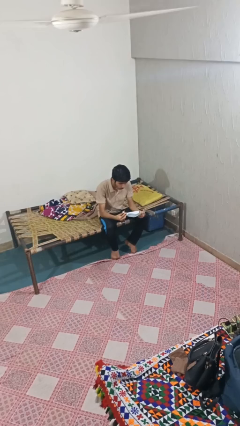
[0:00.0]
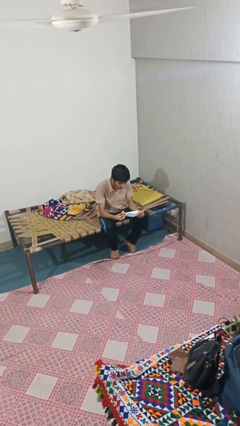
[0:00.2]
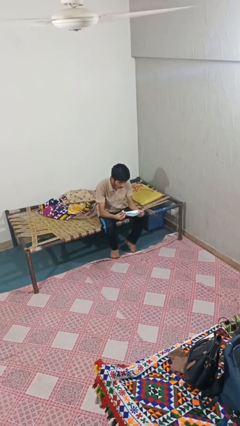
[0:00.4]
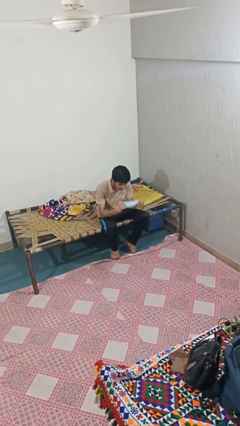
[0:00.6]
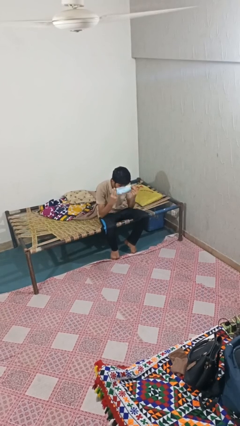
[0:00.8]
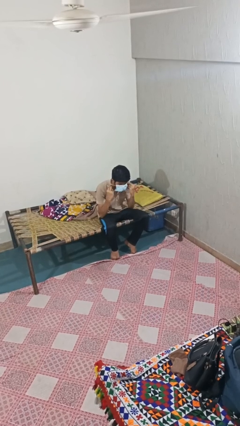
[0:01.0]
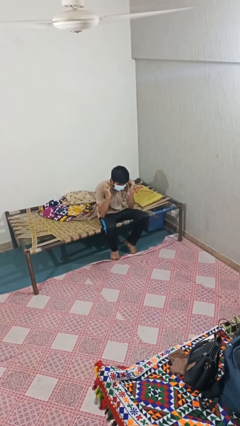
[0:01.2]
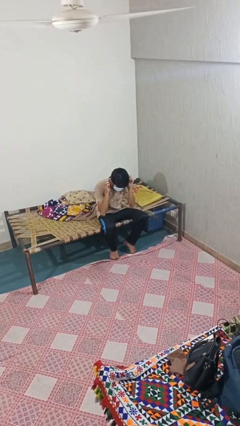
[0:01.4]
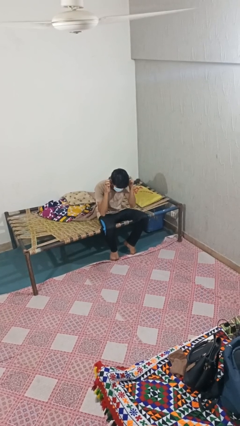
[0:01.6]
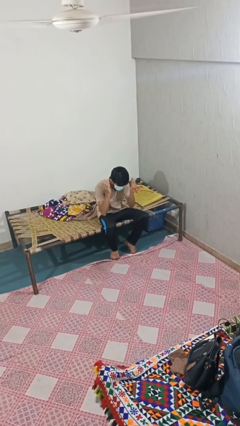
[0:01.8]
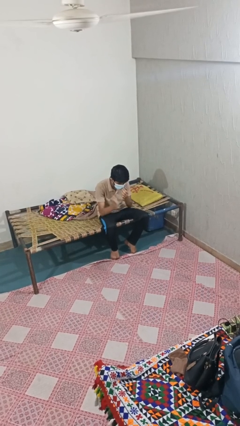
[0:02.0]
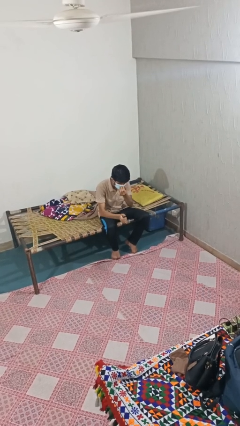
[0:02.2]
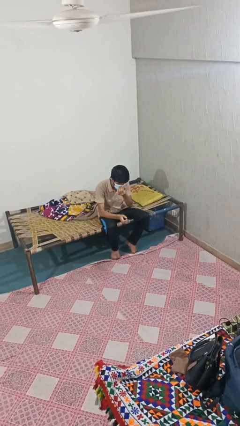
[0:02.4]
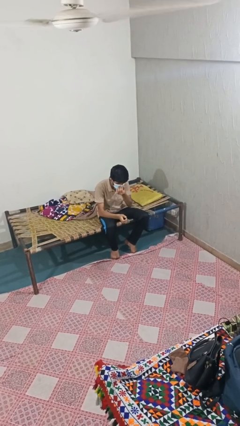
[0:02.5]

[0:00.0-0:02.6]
person puts on facemask

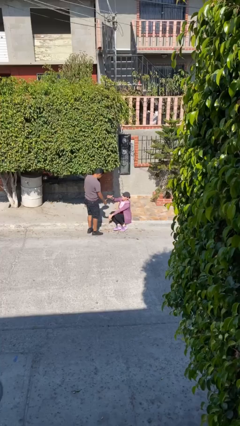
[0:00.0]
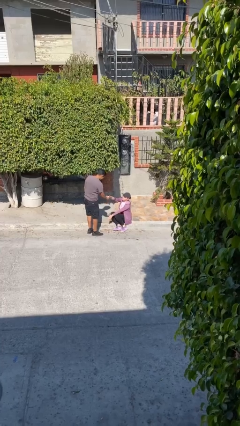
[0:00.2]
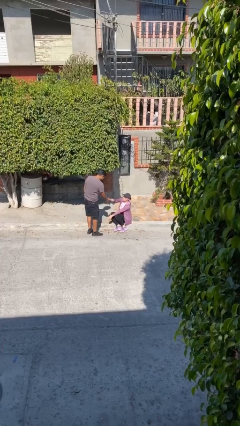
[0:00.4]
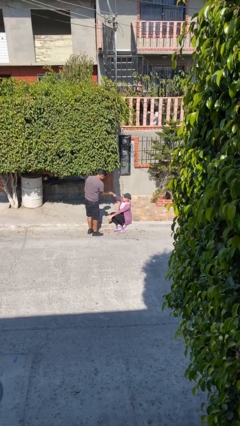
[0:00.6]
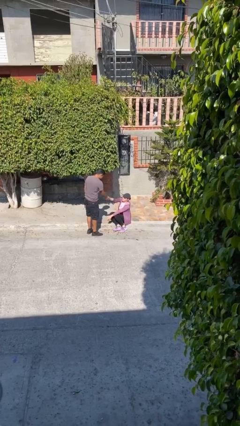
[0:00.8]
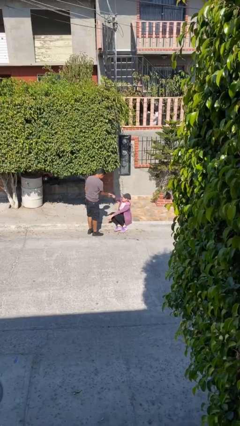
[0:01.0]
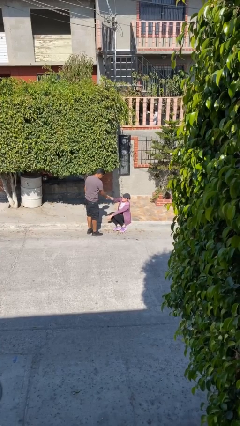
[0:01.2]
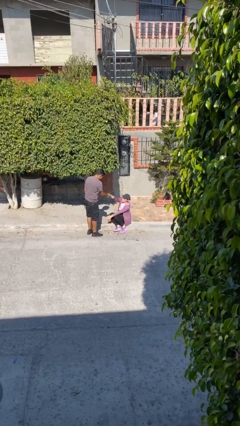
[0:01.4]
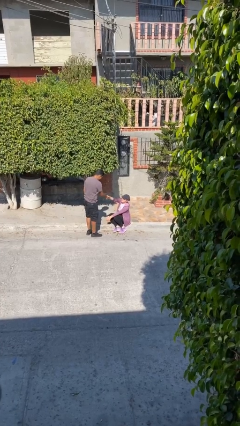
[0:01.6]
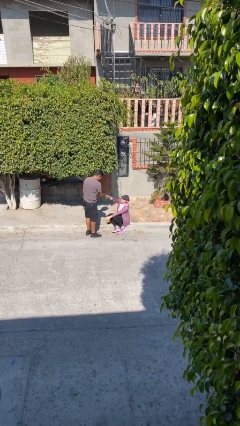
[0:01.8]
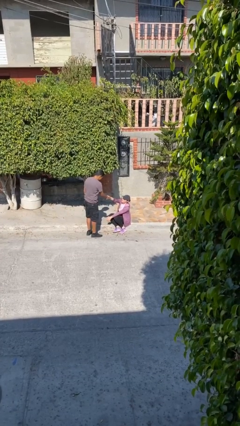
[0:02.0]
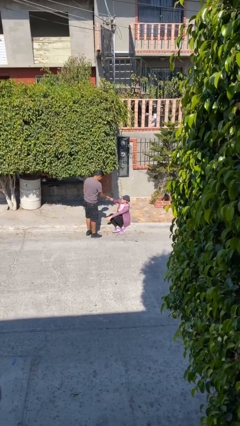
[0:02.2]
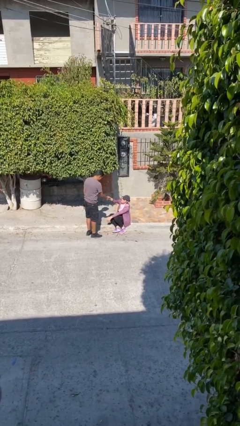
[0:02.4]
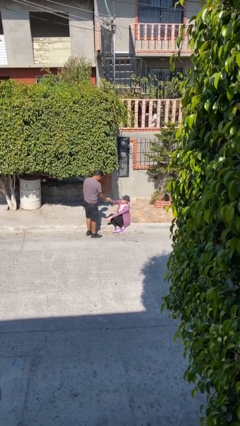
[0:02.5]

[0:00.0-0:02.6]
person shakes hand

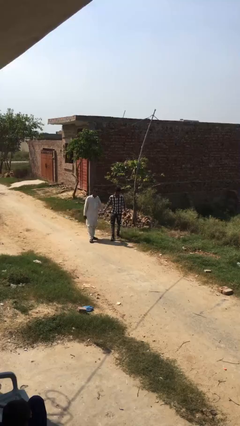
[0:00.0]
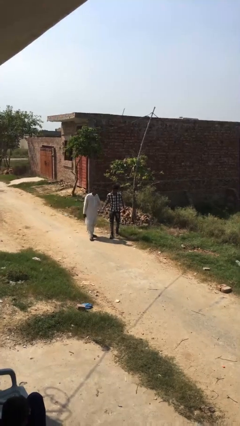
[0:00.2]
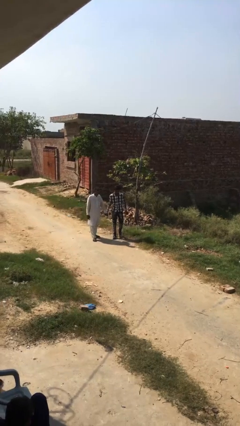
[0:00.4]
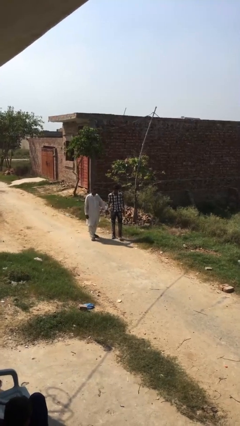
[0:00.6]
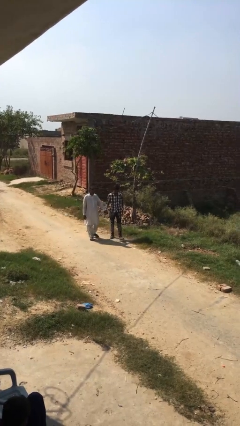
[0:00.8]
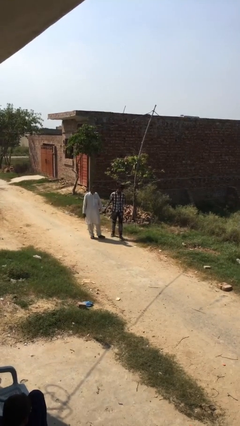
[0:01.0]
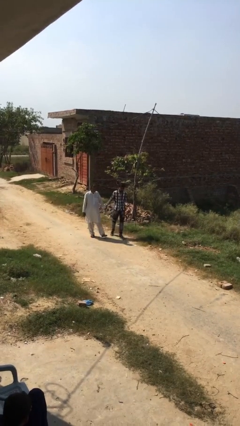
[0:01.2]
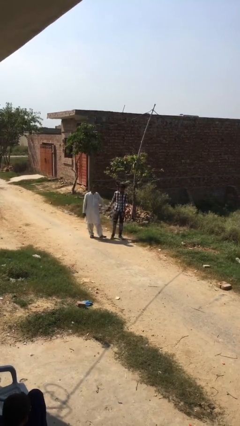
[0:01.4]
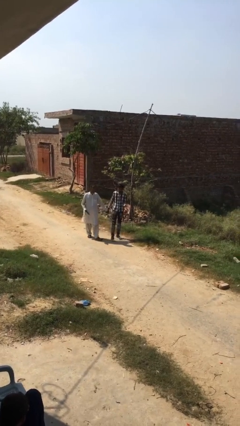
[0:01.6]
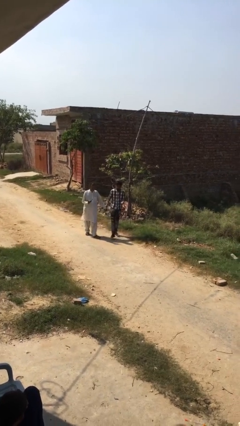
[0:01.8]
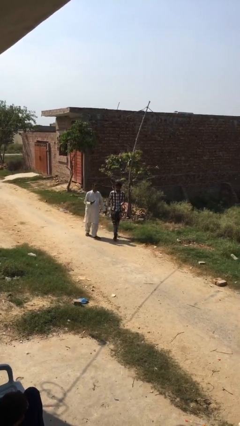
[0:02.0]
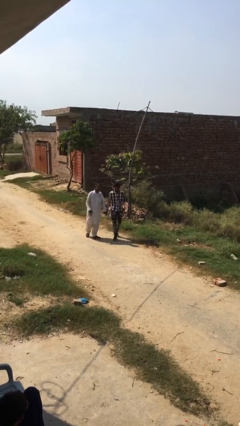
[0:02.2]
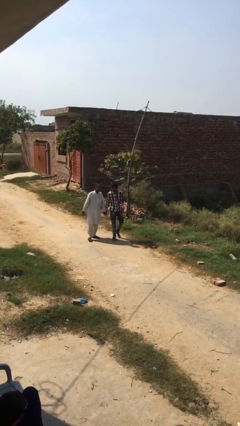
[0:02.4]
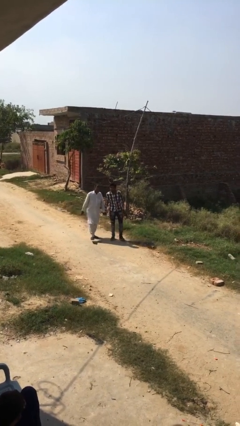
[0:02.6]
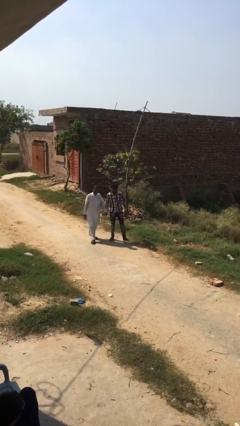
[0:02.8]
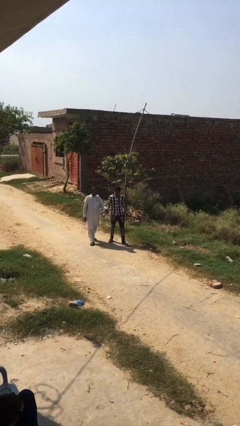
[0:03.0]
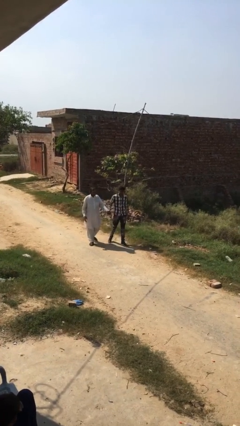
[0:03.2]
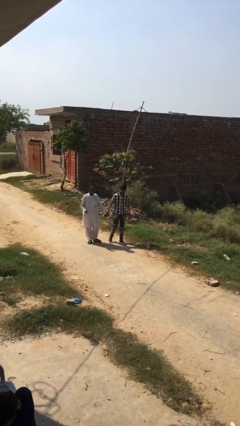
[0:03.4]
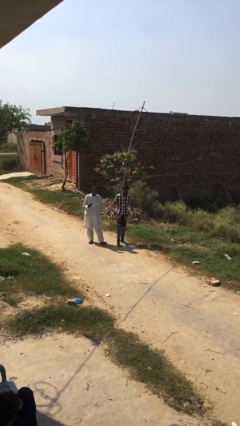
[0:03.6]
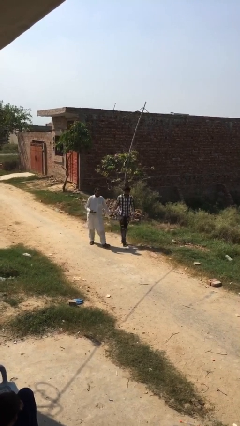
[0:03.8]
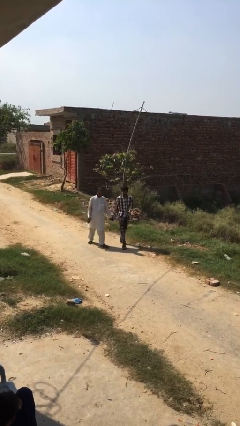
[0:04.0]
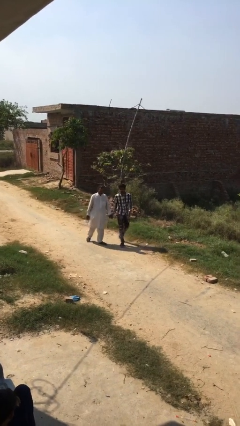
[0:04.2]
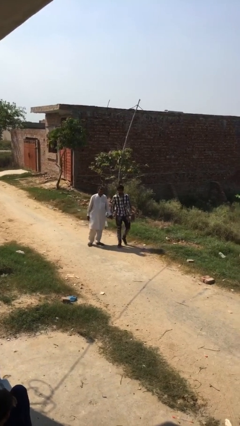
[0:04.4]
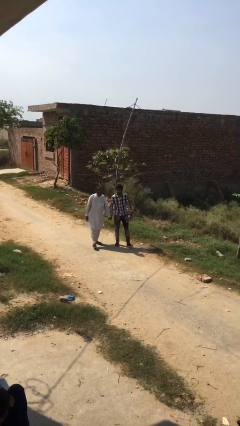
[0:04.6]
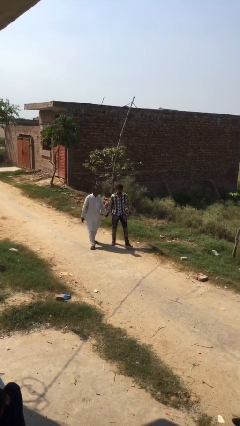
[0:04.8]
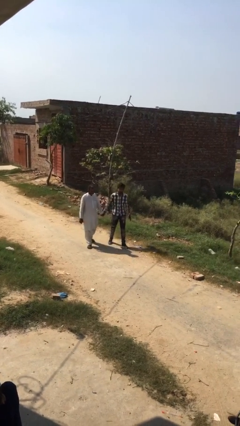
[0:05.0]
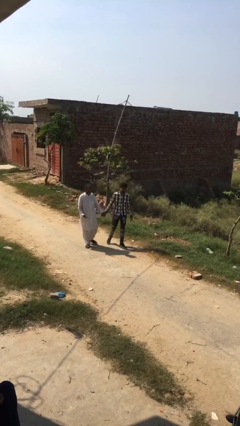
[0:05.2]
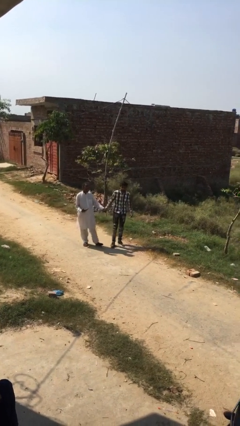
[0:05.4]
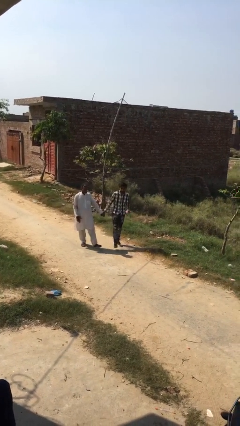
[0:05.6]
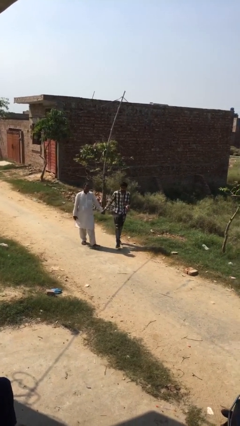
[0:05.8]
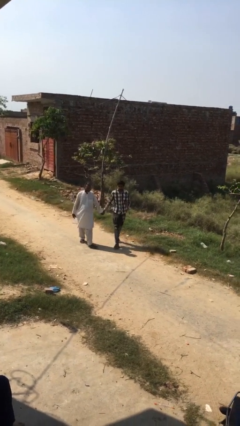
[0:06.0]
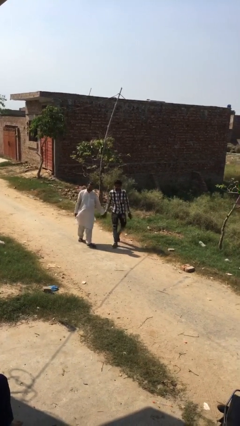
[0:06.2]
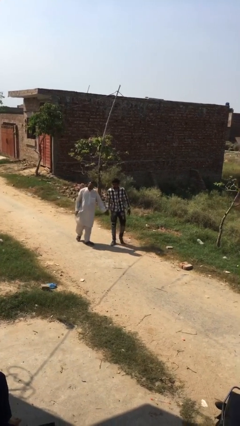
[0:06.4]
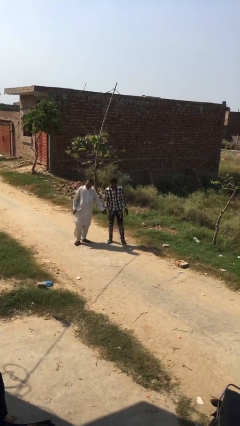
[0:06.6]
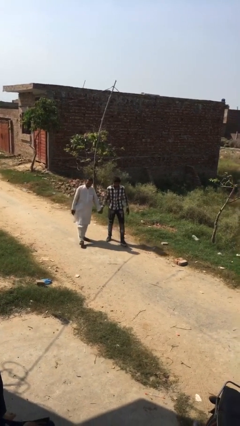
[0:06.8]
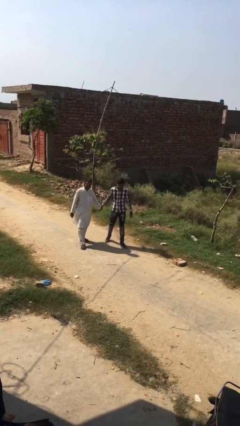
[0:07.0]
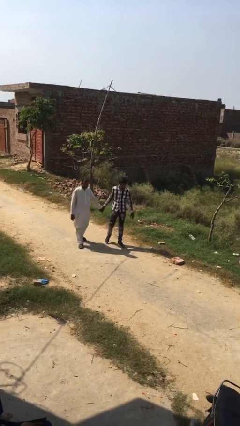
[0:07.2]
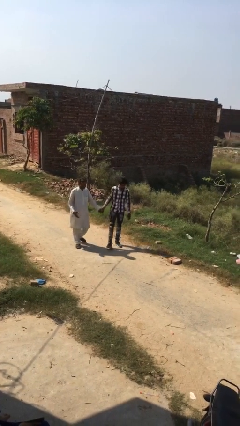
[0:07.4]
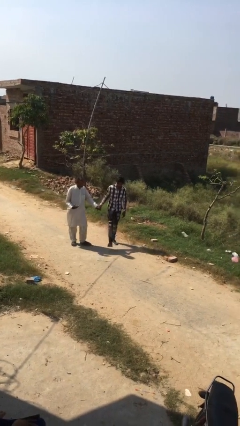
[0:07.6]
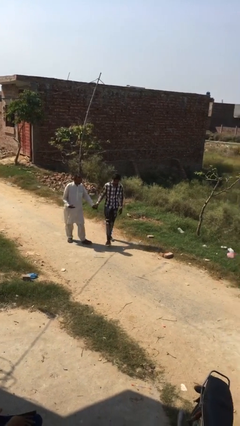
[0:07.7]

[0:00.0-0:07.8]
person holds hand

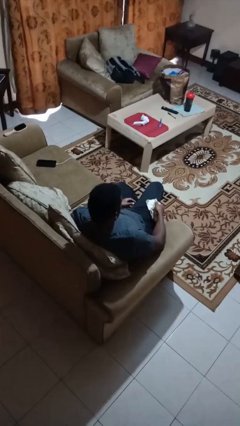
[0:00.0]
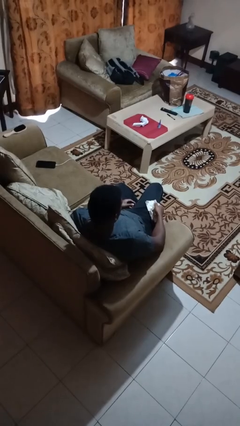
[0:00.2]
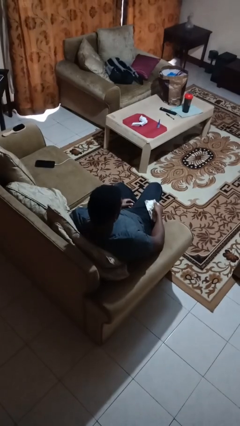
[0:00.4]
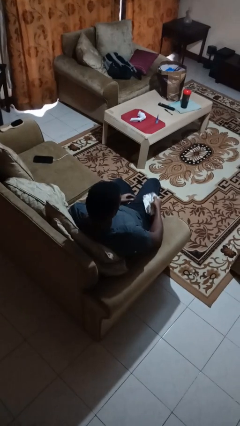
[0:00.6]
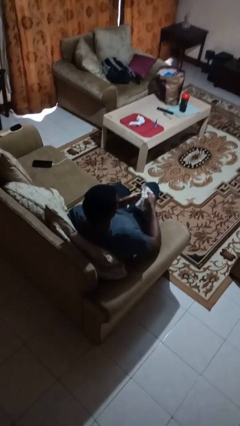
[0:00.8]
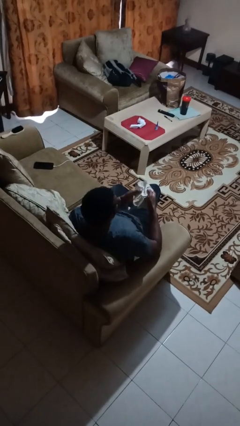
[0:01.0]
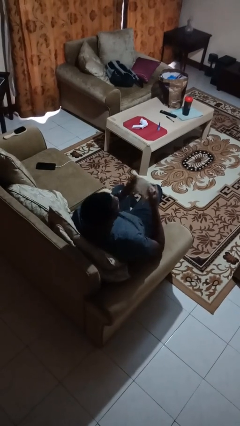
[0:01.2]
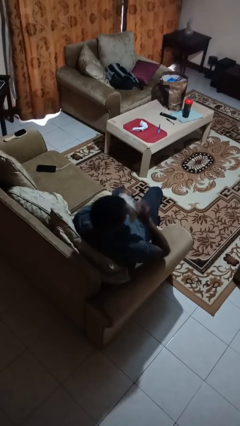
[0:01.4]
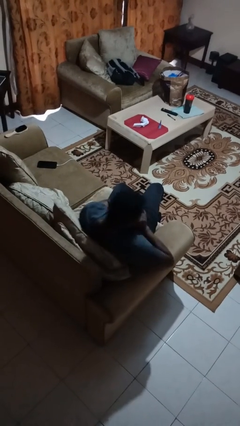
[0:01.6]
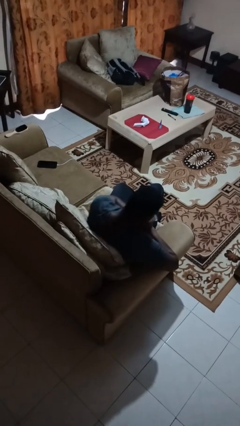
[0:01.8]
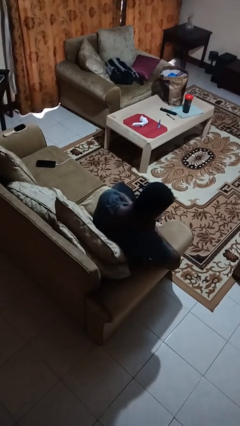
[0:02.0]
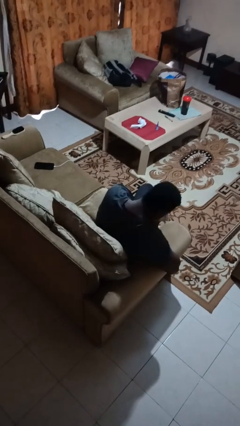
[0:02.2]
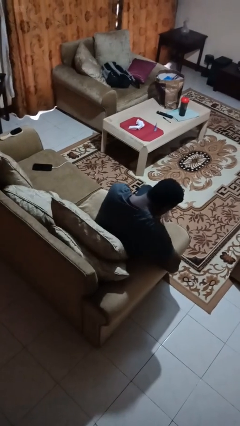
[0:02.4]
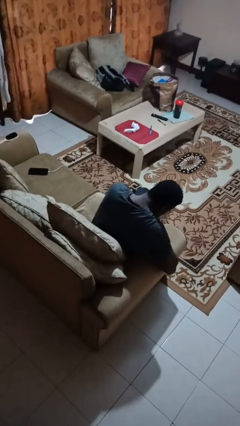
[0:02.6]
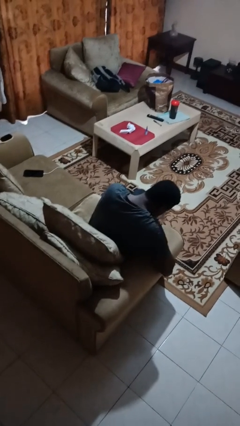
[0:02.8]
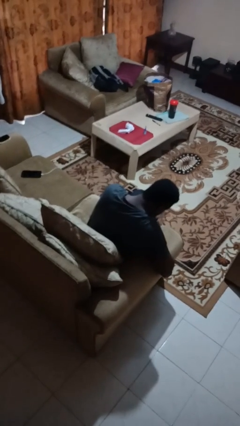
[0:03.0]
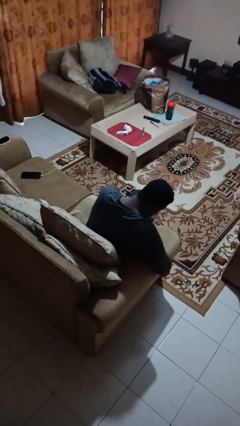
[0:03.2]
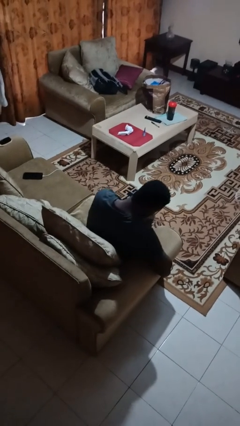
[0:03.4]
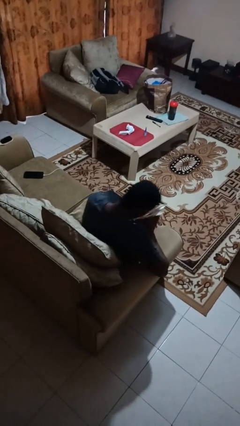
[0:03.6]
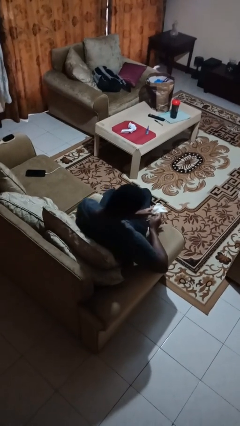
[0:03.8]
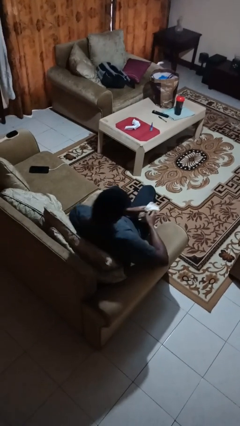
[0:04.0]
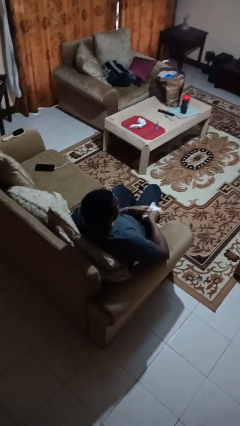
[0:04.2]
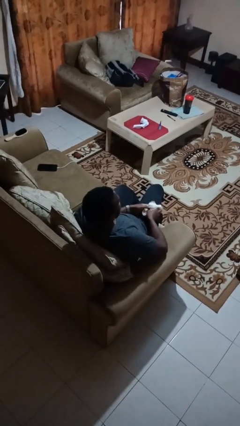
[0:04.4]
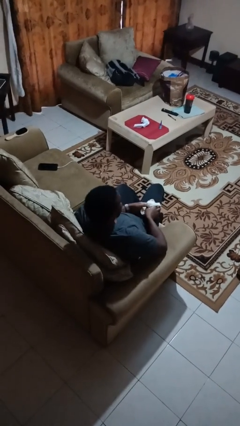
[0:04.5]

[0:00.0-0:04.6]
person blows nose

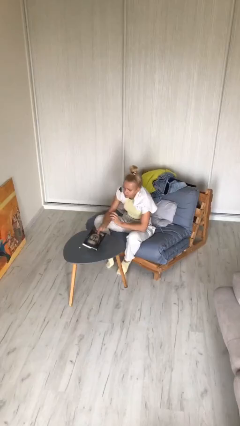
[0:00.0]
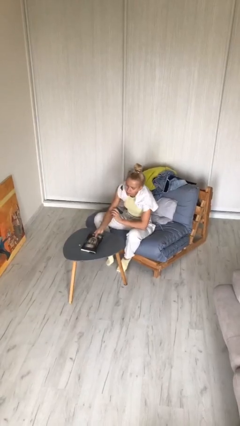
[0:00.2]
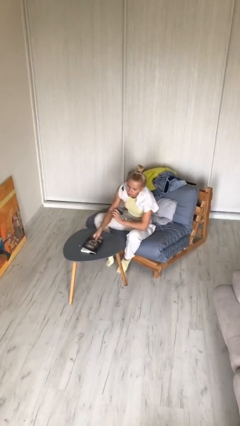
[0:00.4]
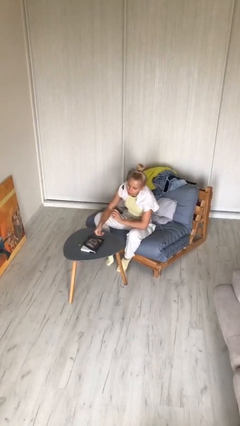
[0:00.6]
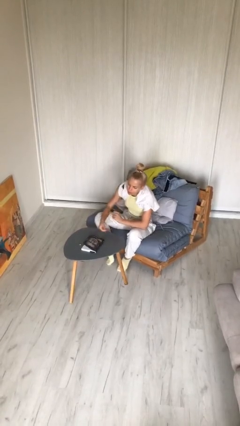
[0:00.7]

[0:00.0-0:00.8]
person puts down object on table
